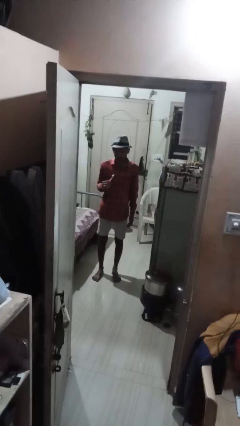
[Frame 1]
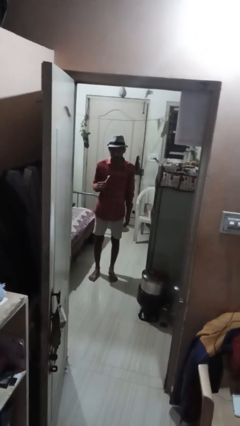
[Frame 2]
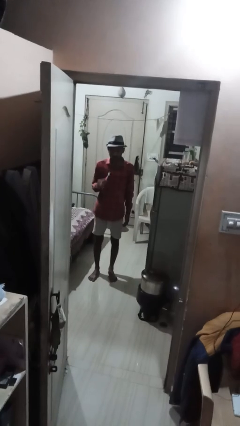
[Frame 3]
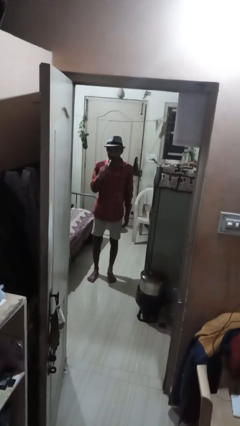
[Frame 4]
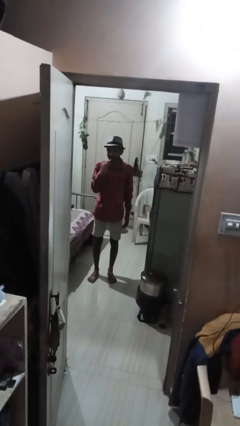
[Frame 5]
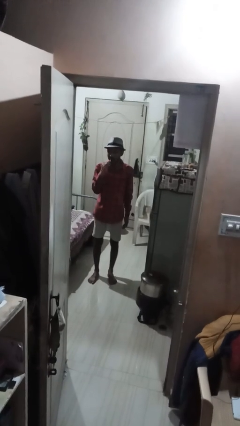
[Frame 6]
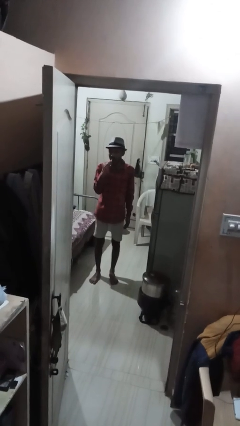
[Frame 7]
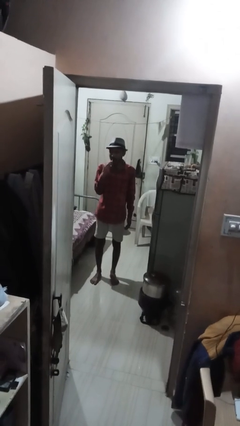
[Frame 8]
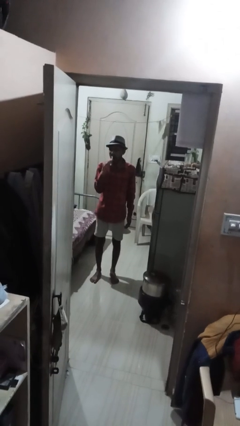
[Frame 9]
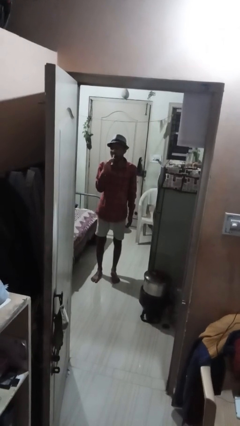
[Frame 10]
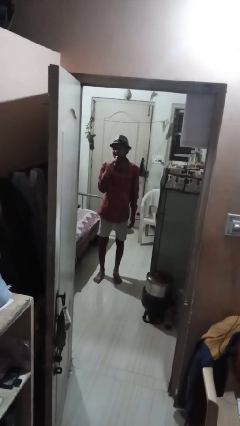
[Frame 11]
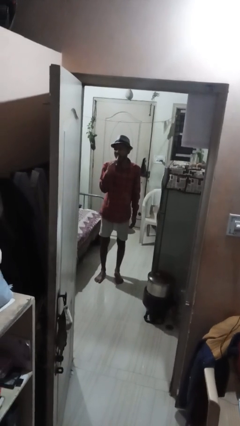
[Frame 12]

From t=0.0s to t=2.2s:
person brushes teeth

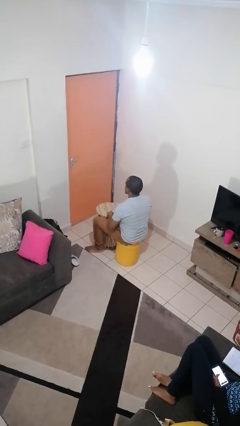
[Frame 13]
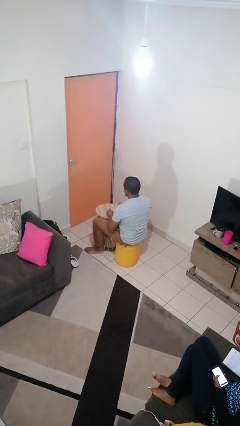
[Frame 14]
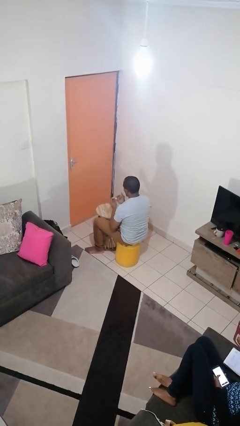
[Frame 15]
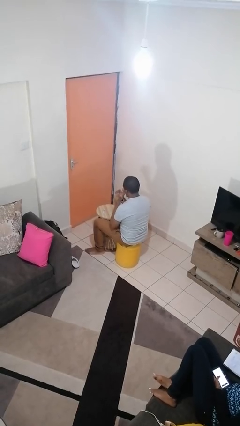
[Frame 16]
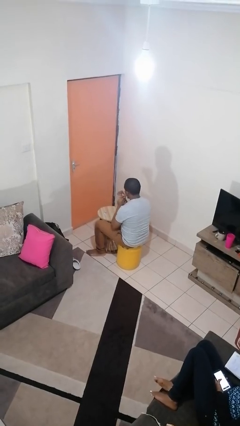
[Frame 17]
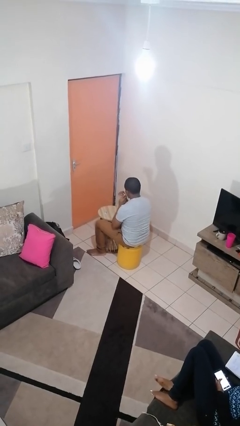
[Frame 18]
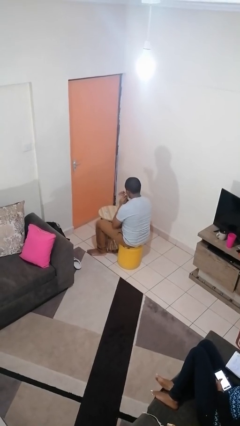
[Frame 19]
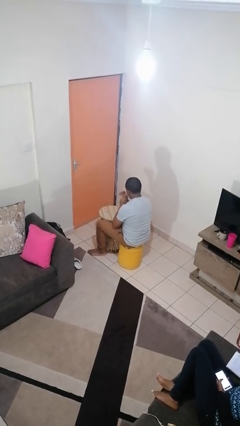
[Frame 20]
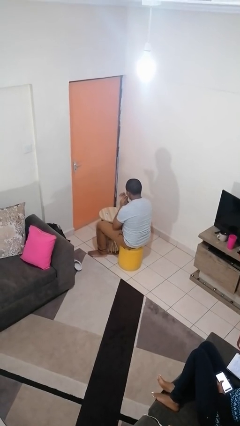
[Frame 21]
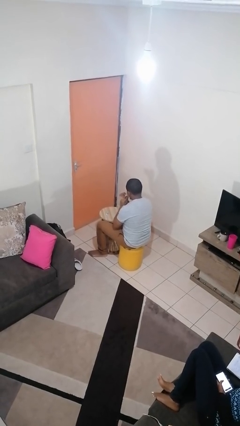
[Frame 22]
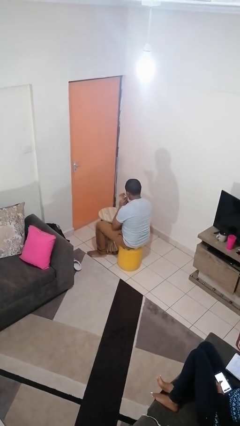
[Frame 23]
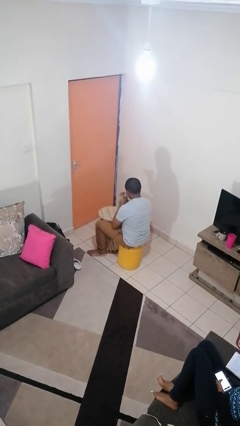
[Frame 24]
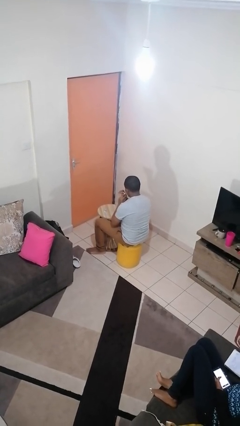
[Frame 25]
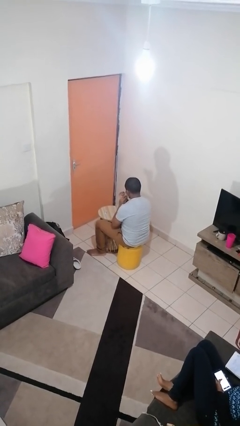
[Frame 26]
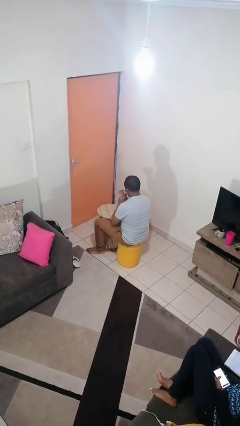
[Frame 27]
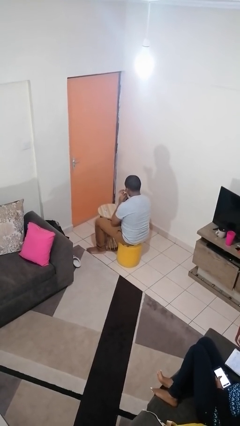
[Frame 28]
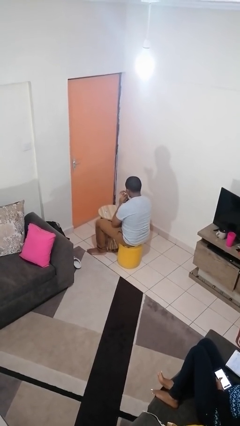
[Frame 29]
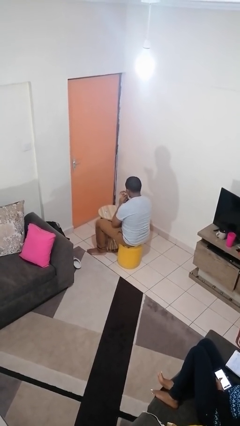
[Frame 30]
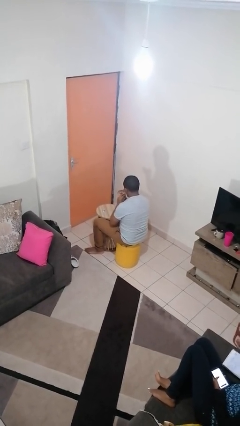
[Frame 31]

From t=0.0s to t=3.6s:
person paints fingernails

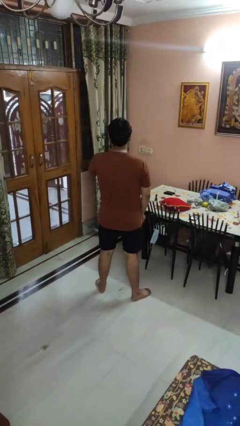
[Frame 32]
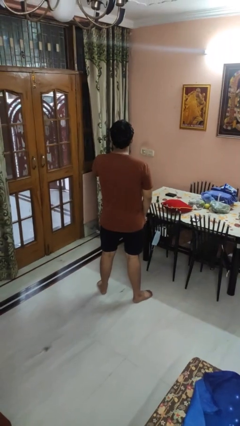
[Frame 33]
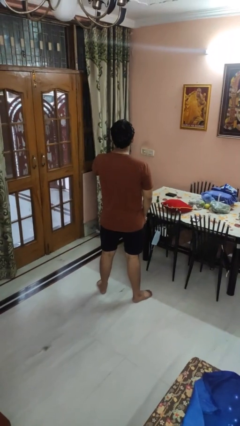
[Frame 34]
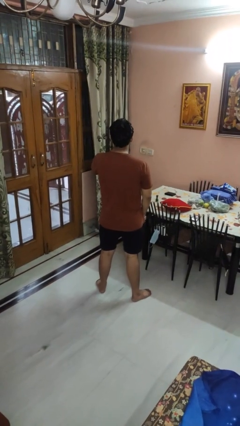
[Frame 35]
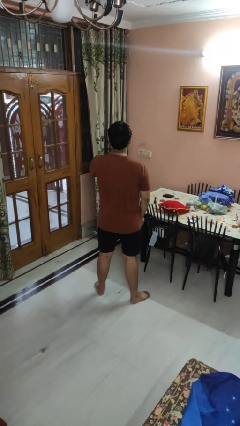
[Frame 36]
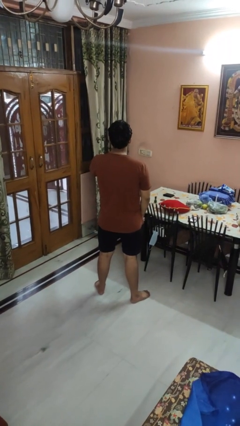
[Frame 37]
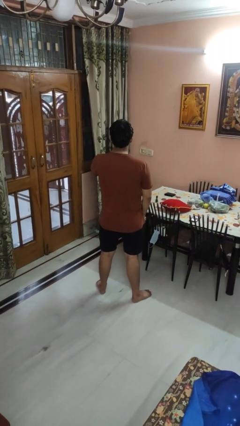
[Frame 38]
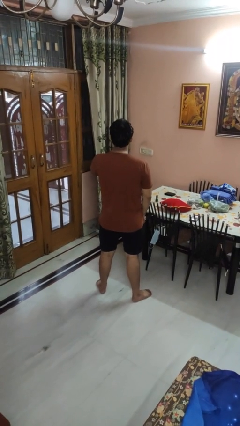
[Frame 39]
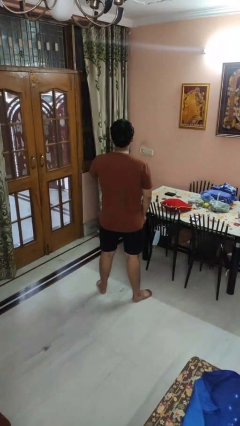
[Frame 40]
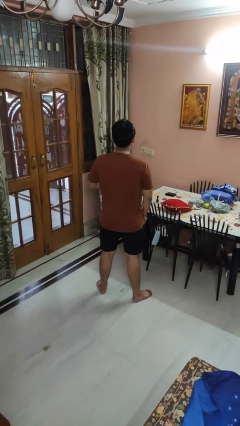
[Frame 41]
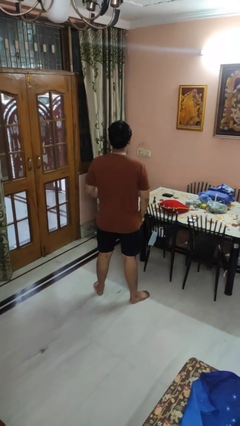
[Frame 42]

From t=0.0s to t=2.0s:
person gestures be quiet

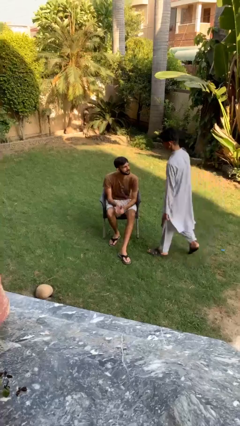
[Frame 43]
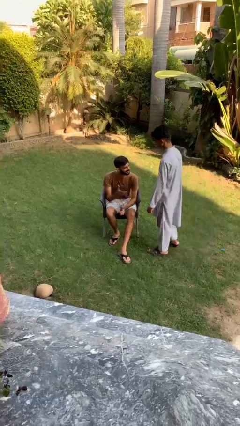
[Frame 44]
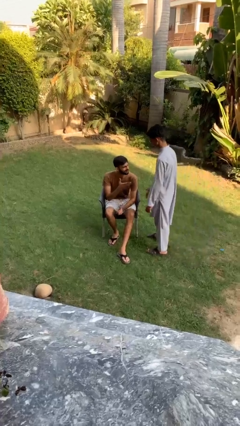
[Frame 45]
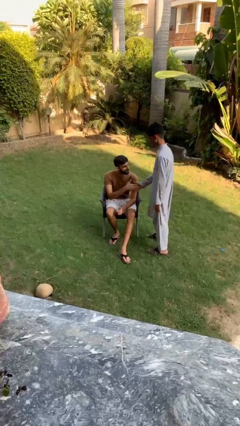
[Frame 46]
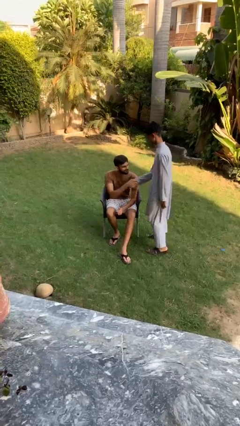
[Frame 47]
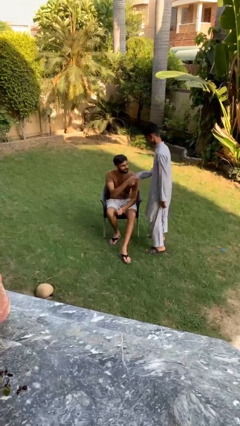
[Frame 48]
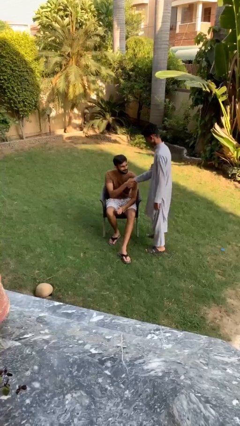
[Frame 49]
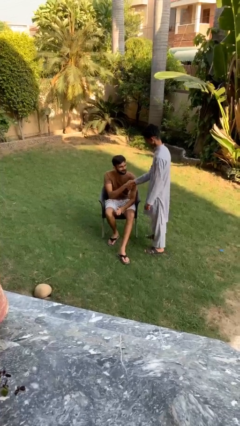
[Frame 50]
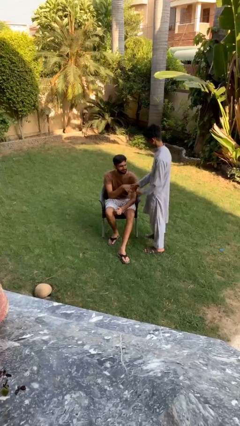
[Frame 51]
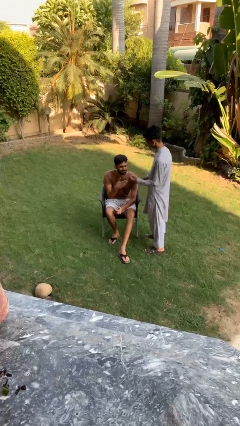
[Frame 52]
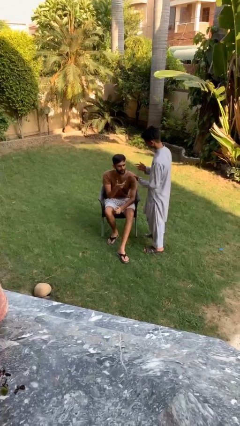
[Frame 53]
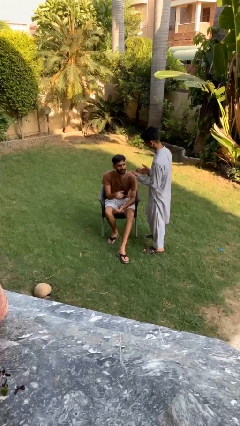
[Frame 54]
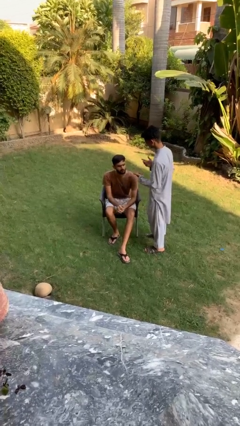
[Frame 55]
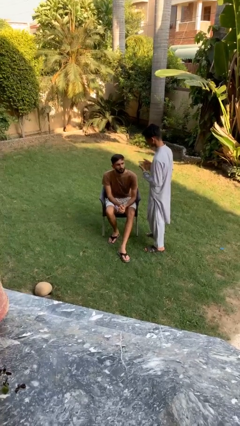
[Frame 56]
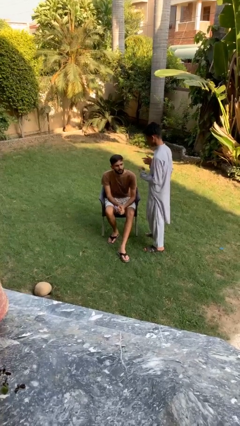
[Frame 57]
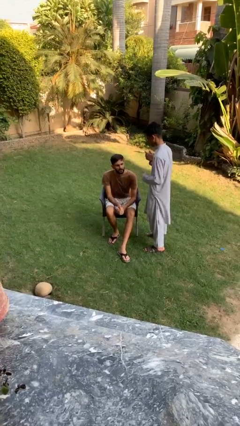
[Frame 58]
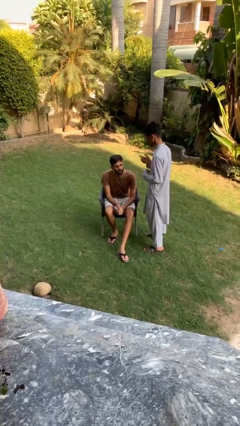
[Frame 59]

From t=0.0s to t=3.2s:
person shakes hand

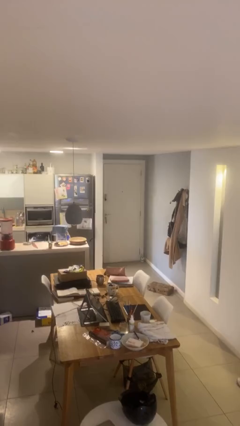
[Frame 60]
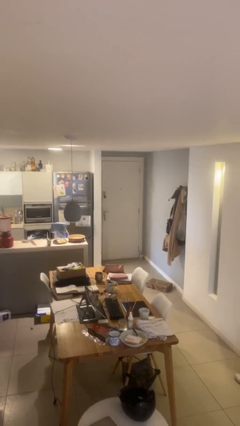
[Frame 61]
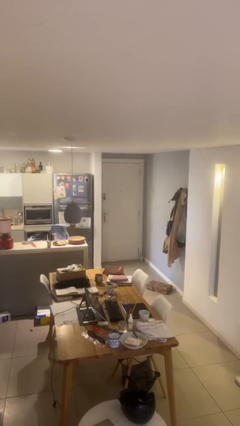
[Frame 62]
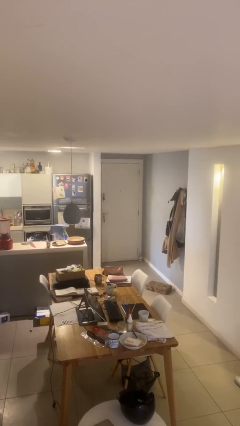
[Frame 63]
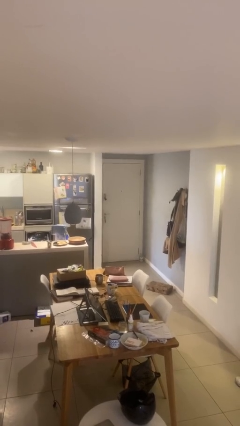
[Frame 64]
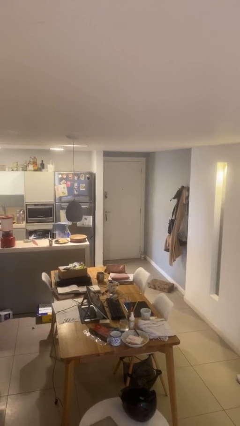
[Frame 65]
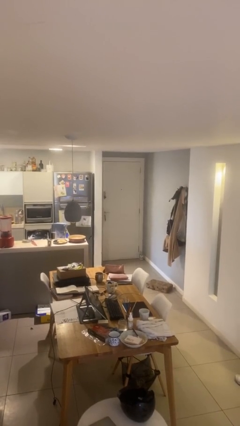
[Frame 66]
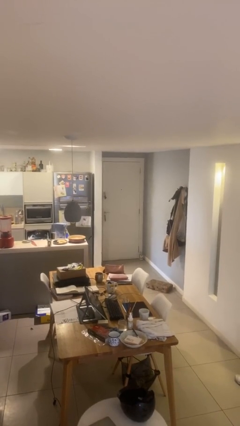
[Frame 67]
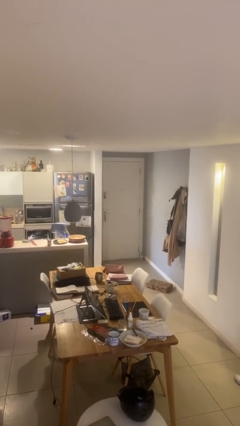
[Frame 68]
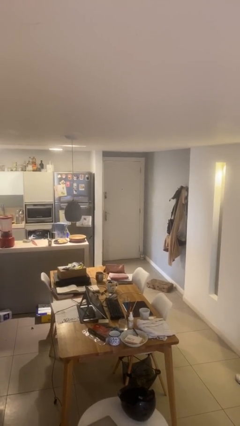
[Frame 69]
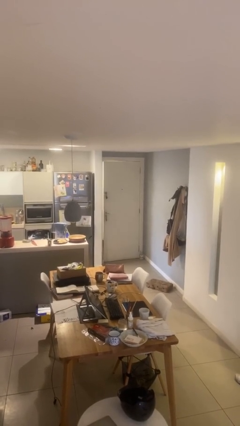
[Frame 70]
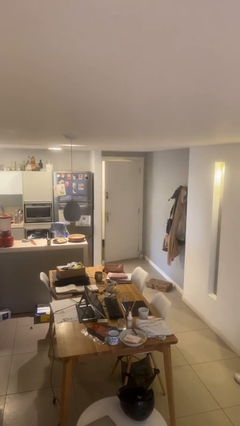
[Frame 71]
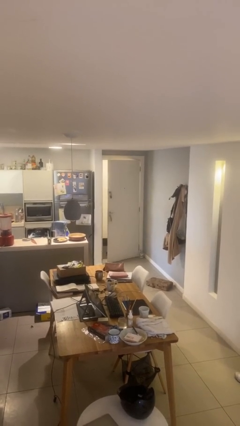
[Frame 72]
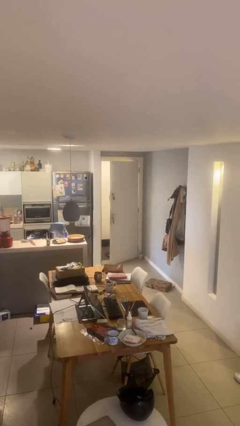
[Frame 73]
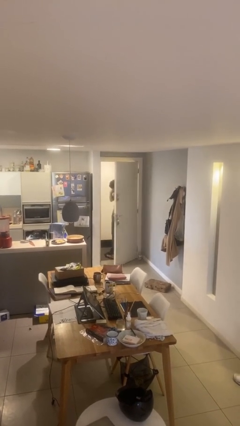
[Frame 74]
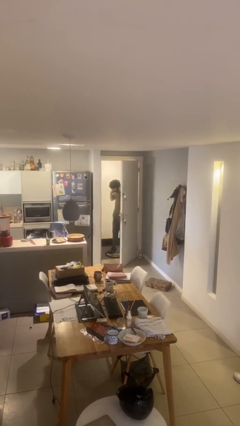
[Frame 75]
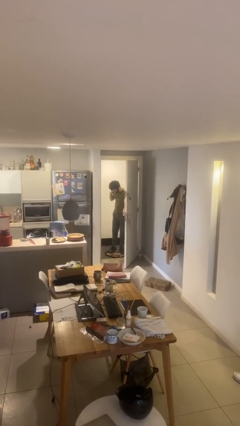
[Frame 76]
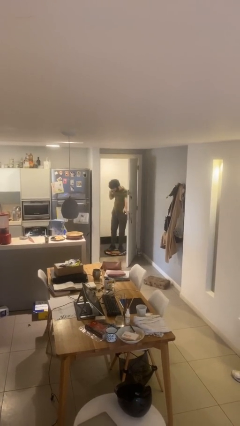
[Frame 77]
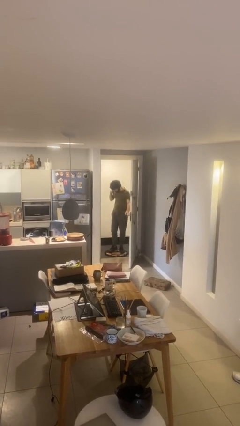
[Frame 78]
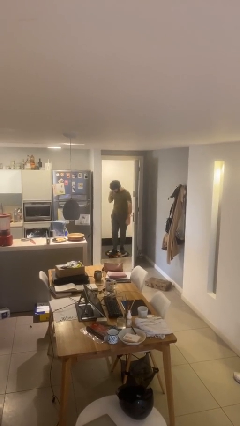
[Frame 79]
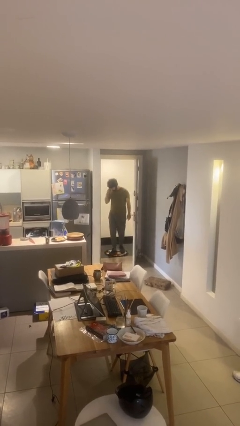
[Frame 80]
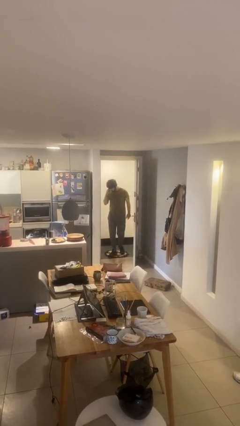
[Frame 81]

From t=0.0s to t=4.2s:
person opens facility door

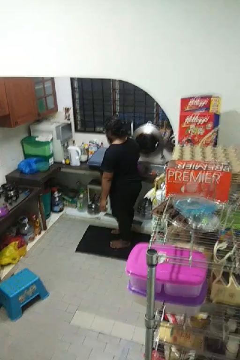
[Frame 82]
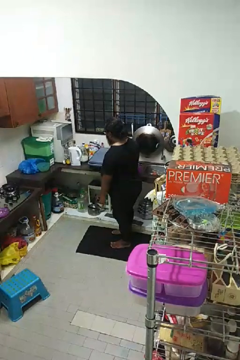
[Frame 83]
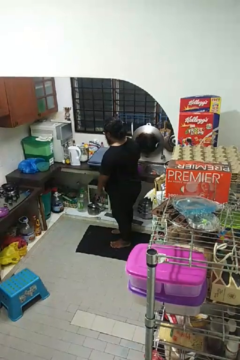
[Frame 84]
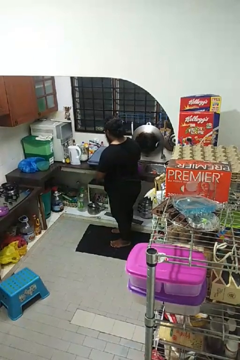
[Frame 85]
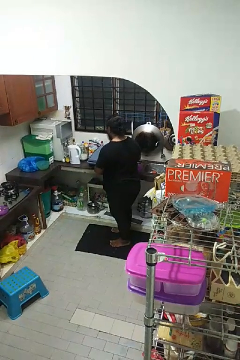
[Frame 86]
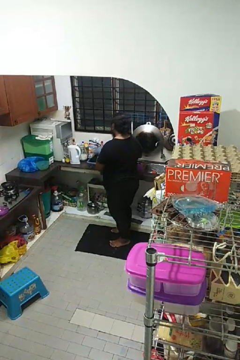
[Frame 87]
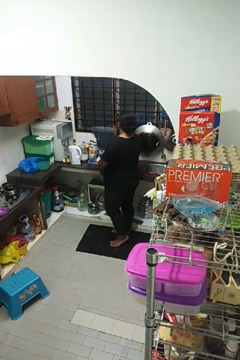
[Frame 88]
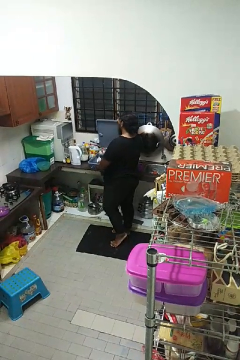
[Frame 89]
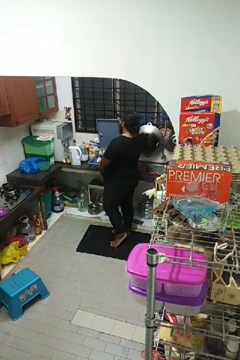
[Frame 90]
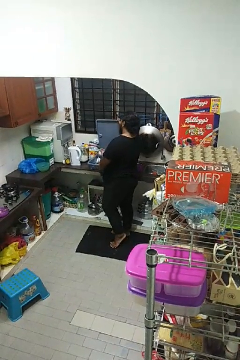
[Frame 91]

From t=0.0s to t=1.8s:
person opens dishwasher

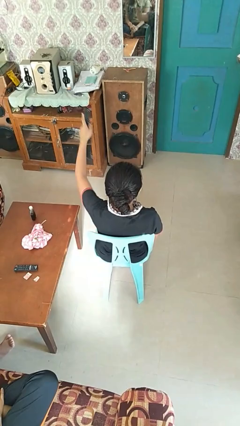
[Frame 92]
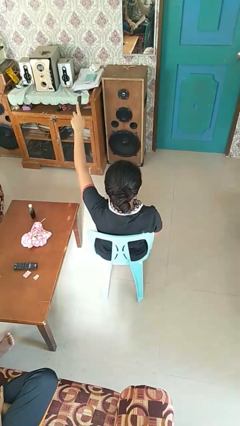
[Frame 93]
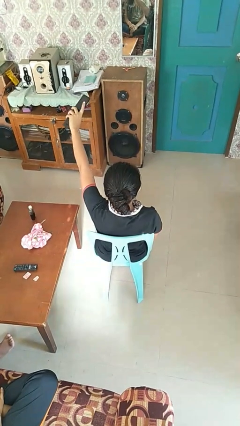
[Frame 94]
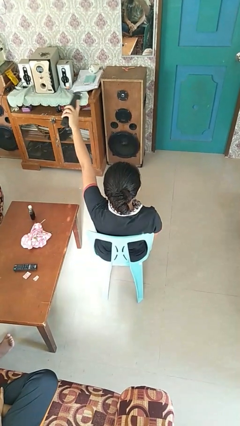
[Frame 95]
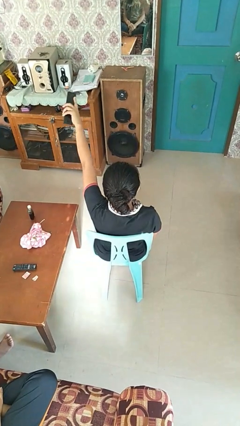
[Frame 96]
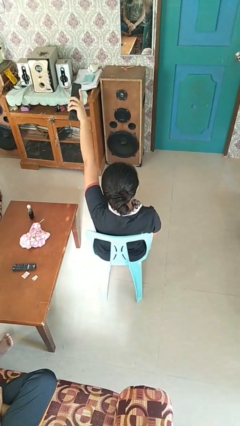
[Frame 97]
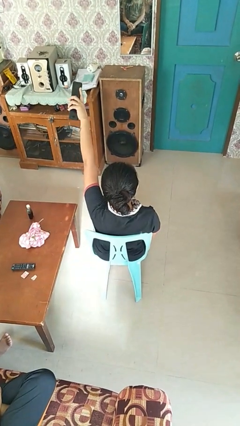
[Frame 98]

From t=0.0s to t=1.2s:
person uses television remote
